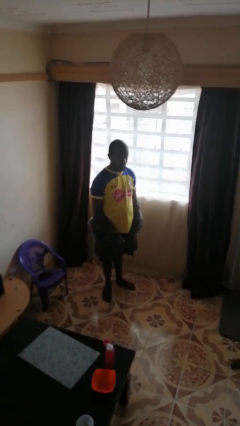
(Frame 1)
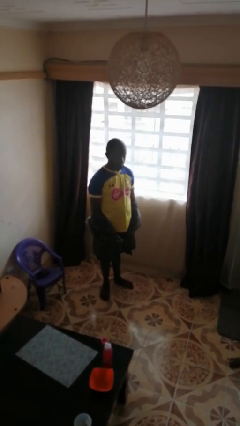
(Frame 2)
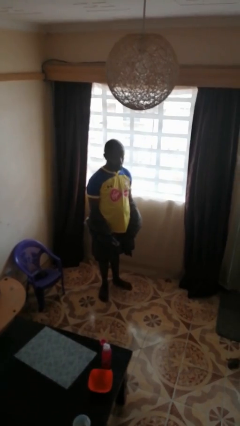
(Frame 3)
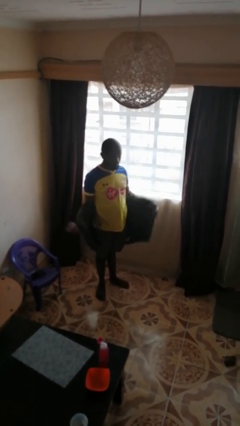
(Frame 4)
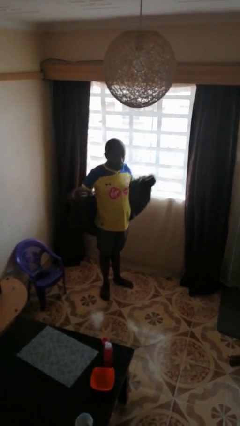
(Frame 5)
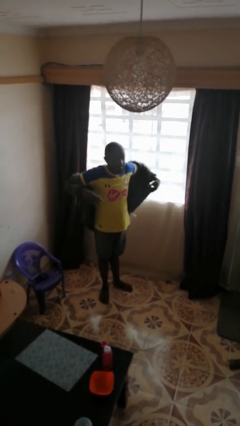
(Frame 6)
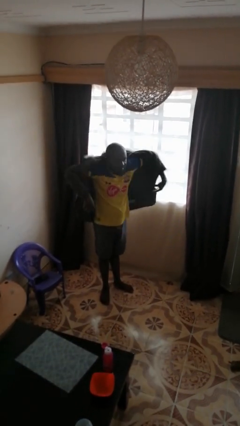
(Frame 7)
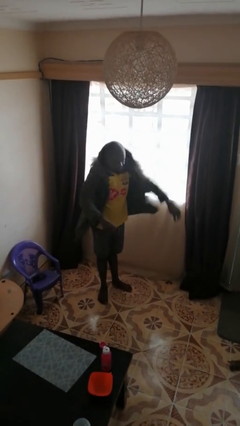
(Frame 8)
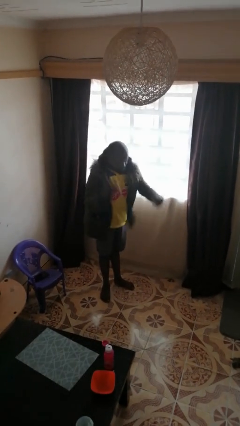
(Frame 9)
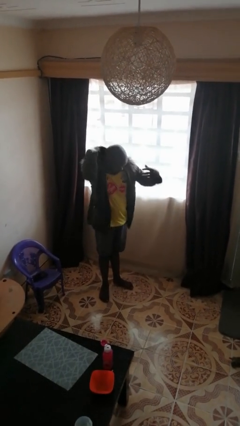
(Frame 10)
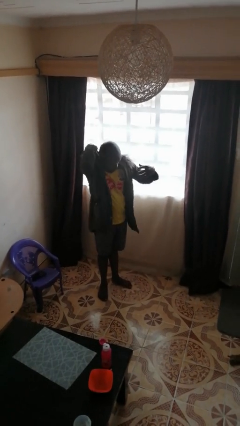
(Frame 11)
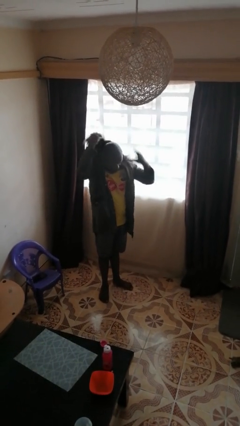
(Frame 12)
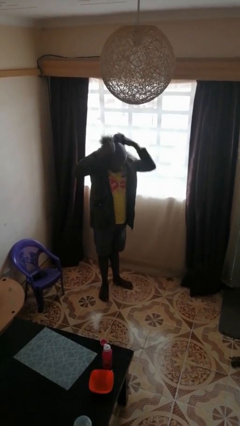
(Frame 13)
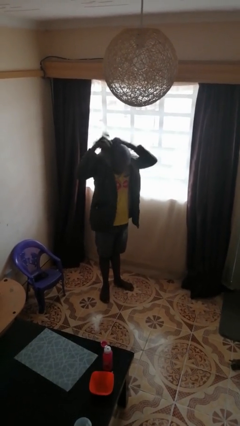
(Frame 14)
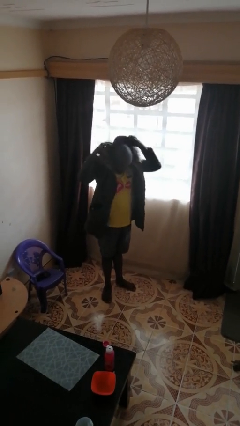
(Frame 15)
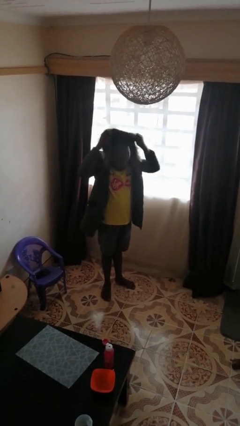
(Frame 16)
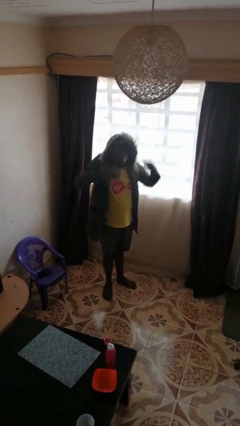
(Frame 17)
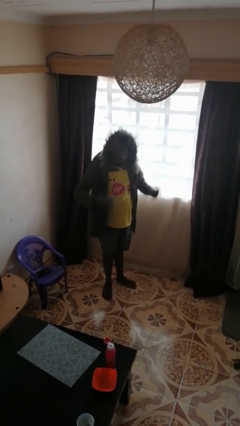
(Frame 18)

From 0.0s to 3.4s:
person puts on hoodie

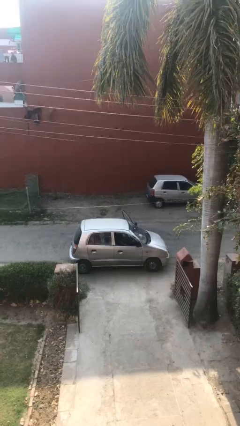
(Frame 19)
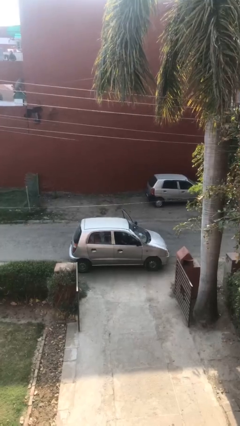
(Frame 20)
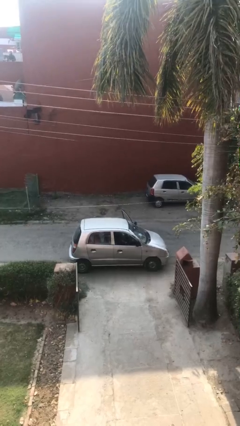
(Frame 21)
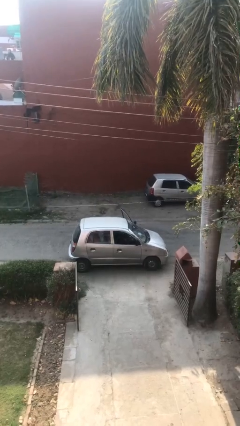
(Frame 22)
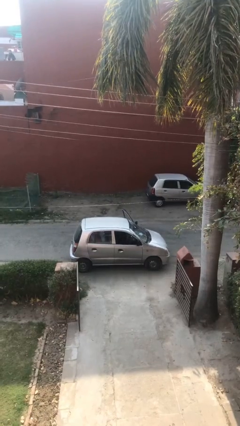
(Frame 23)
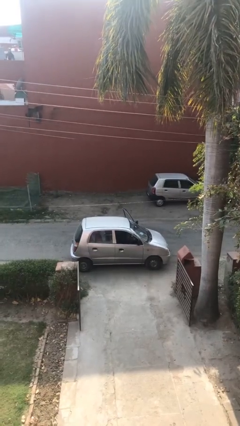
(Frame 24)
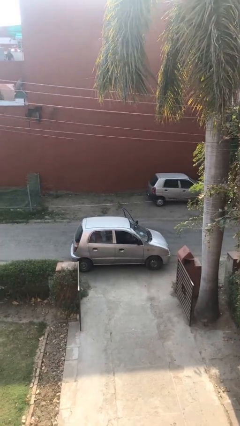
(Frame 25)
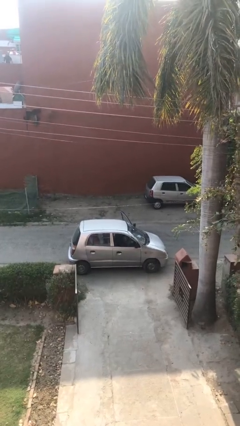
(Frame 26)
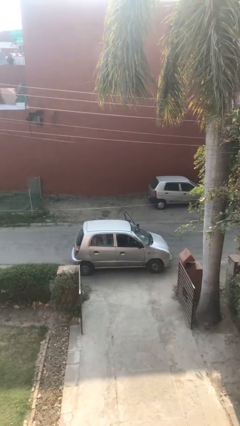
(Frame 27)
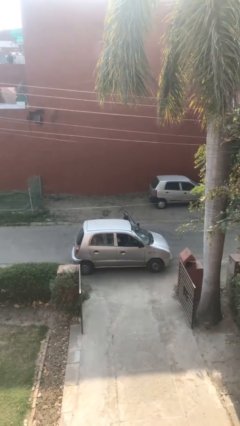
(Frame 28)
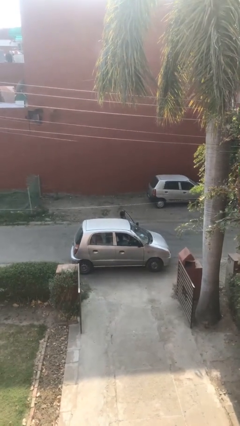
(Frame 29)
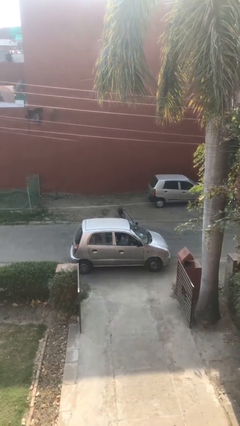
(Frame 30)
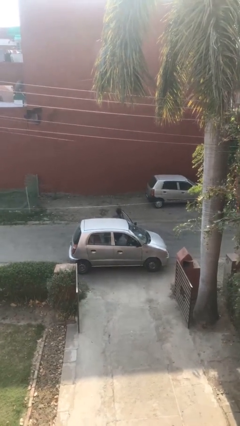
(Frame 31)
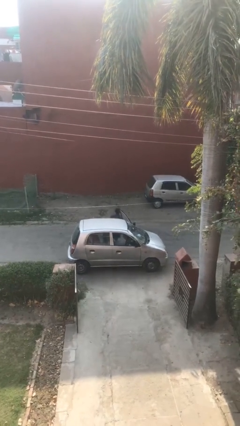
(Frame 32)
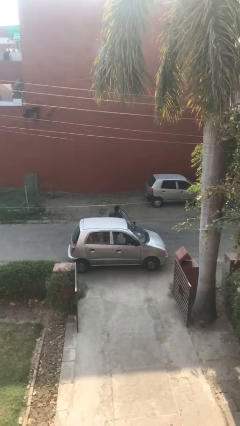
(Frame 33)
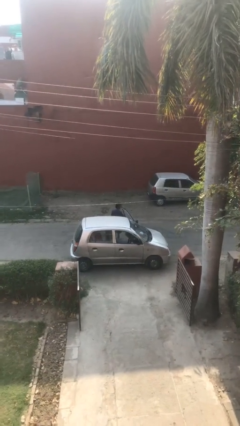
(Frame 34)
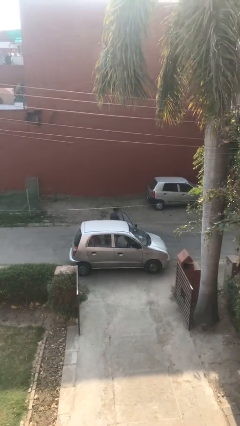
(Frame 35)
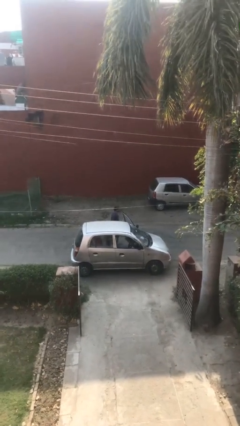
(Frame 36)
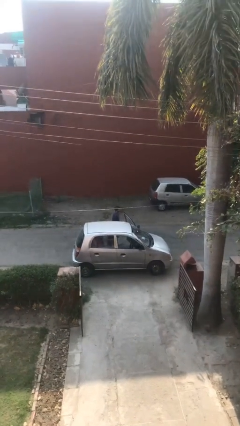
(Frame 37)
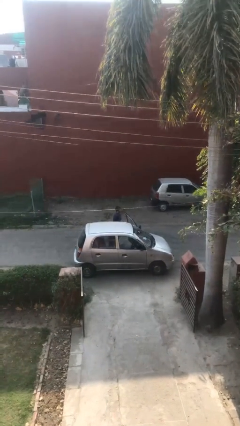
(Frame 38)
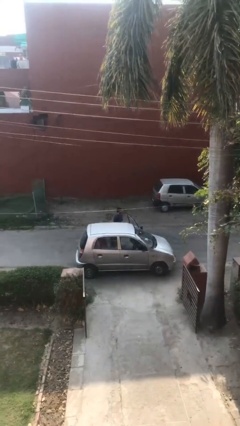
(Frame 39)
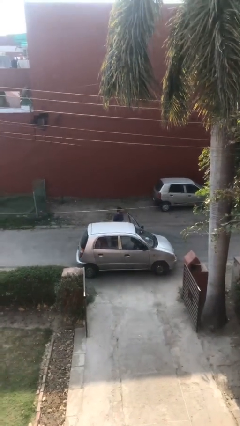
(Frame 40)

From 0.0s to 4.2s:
person exits car

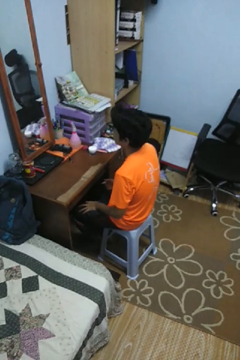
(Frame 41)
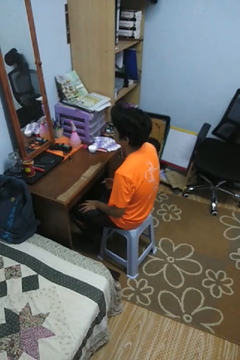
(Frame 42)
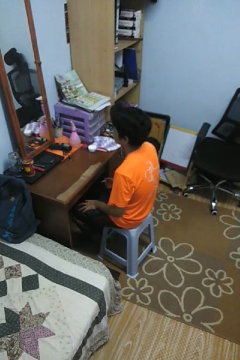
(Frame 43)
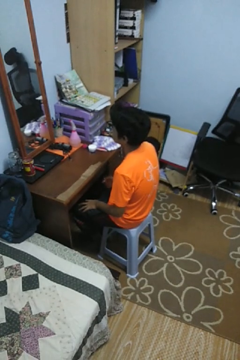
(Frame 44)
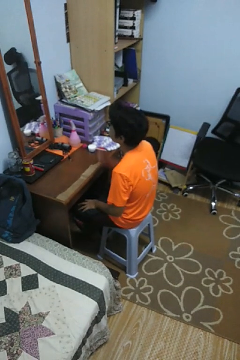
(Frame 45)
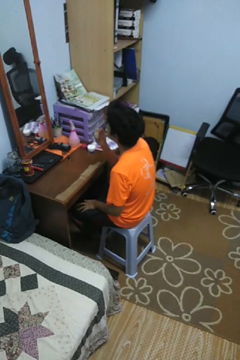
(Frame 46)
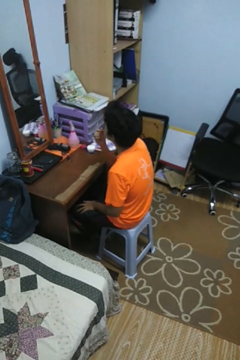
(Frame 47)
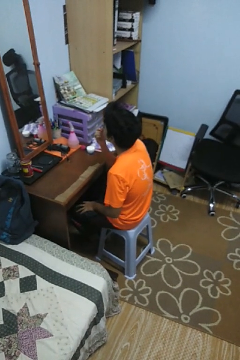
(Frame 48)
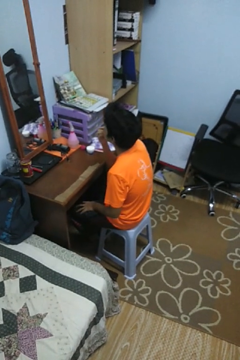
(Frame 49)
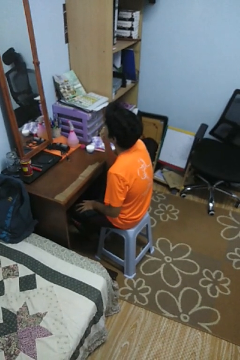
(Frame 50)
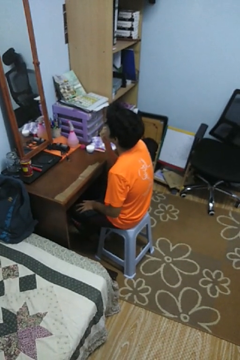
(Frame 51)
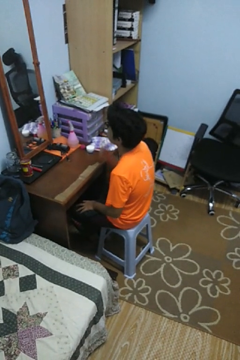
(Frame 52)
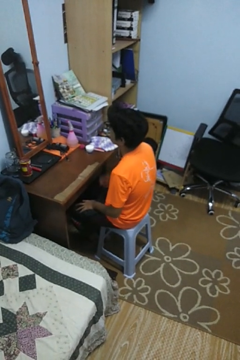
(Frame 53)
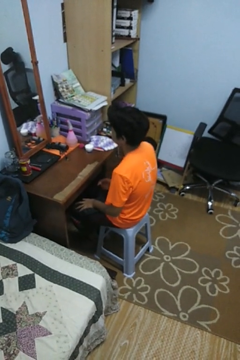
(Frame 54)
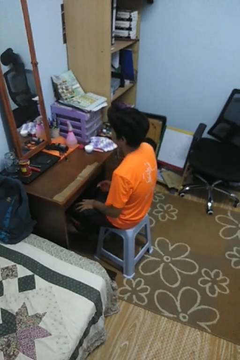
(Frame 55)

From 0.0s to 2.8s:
person applies lip makeup

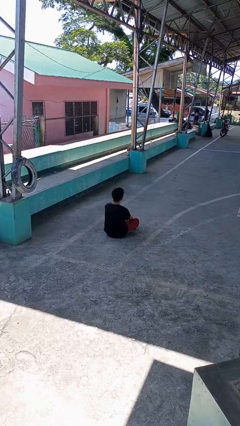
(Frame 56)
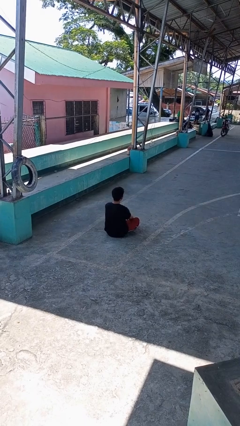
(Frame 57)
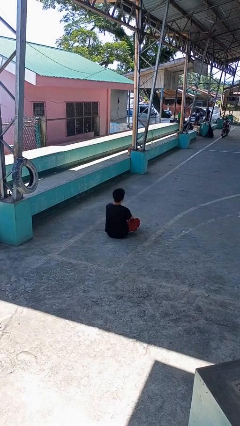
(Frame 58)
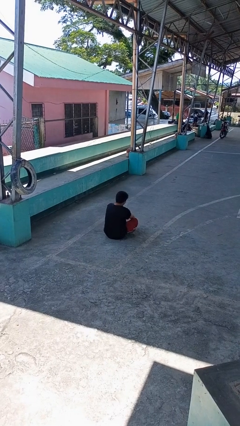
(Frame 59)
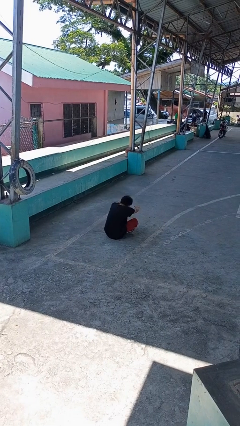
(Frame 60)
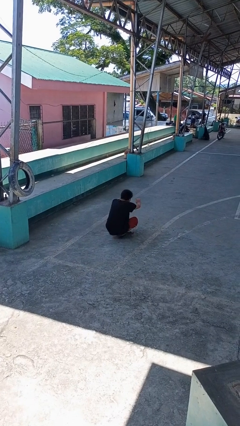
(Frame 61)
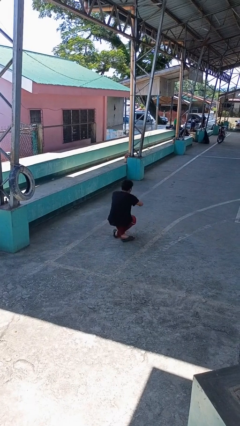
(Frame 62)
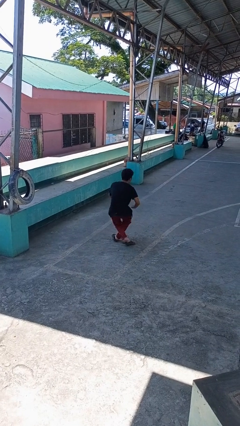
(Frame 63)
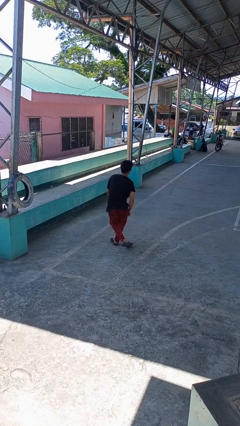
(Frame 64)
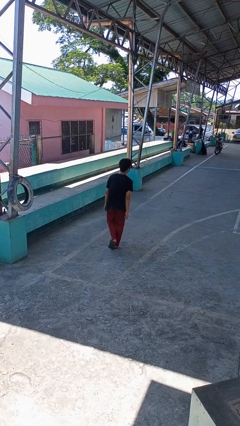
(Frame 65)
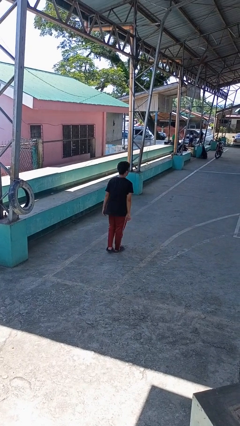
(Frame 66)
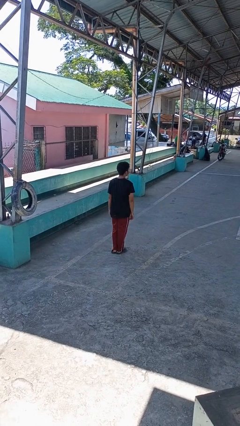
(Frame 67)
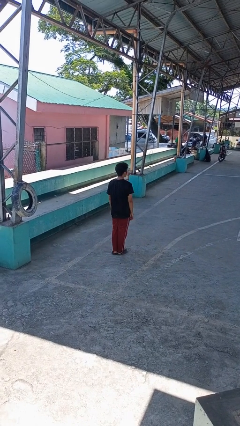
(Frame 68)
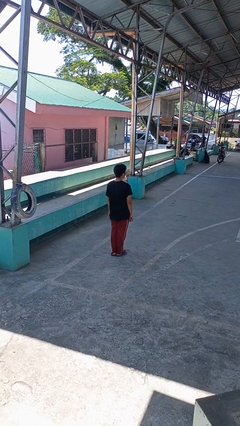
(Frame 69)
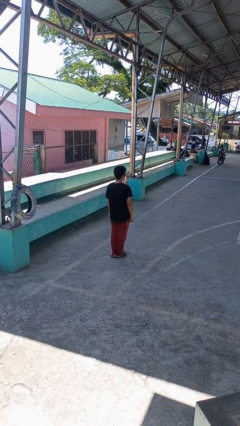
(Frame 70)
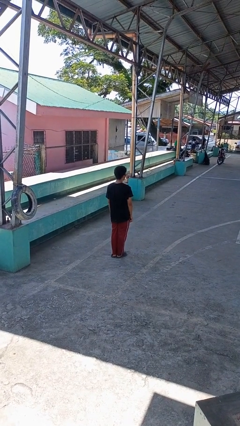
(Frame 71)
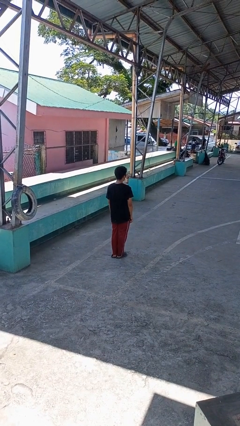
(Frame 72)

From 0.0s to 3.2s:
person stands up from floor

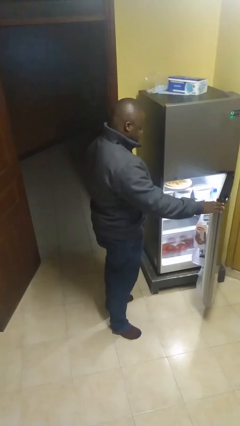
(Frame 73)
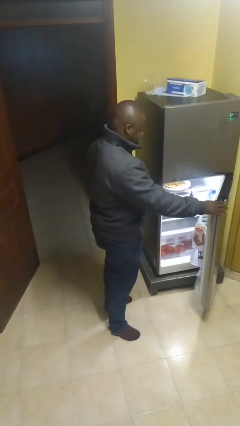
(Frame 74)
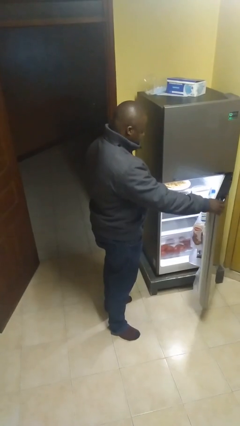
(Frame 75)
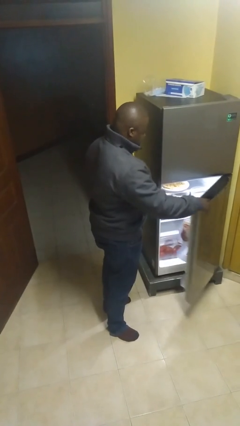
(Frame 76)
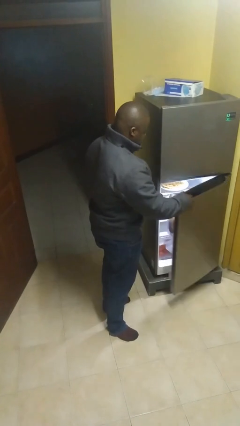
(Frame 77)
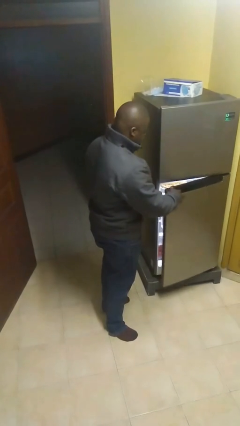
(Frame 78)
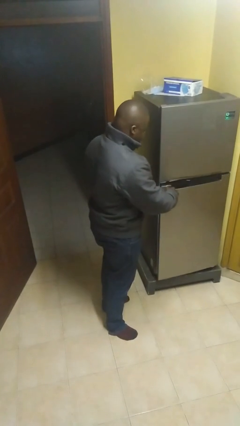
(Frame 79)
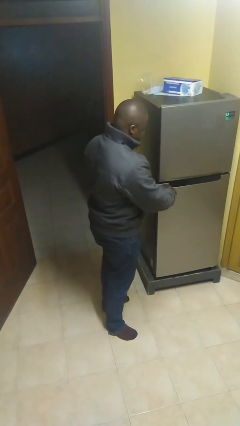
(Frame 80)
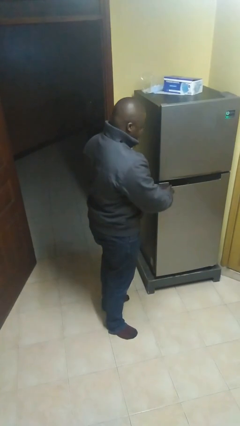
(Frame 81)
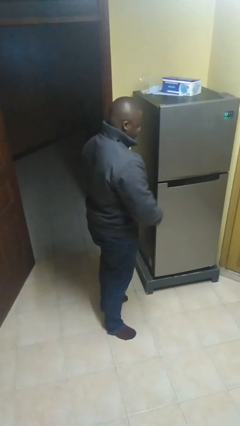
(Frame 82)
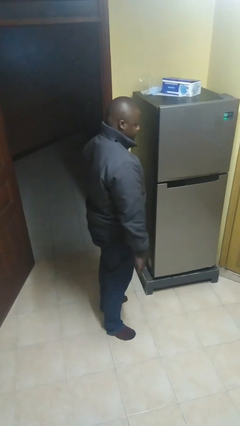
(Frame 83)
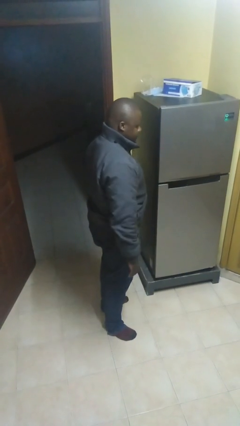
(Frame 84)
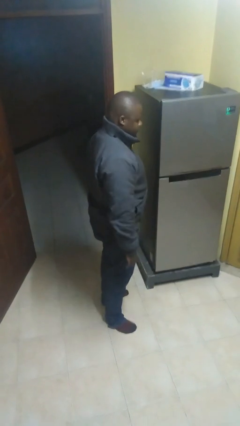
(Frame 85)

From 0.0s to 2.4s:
person closes refrigerator

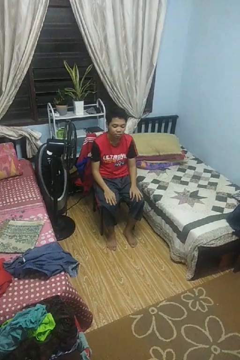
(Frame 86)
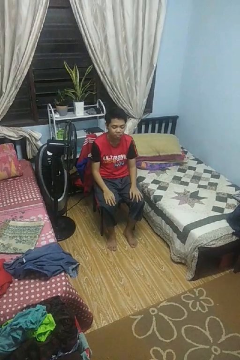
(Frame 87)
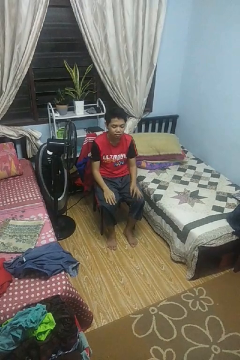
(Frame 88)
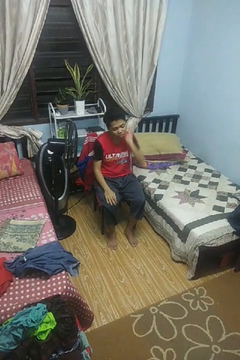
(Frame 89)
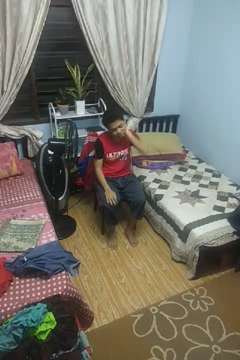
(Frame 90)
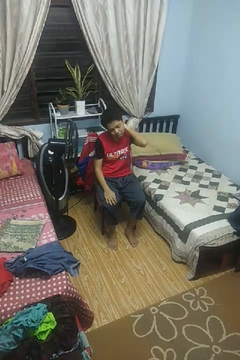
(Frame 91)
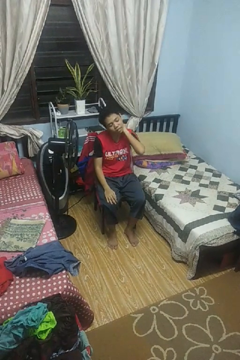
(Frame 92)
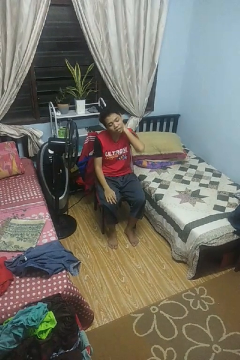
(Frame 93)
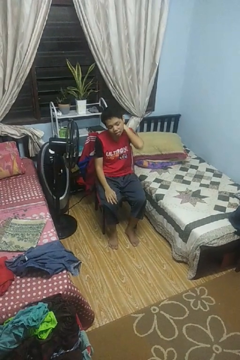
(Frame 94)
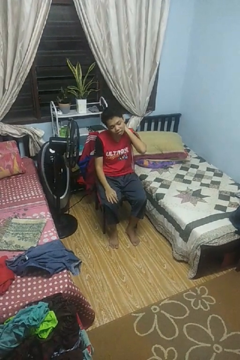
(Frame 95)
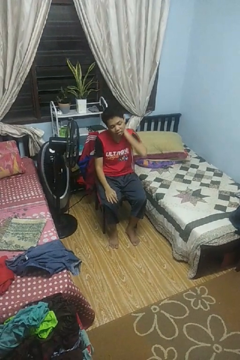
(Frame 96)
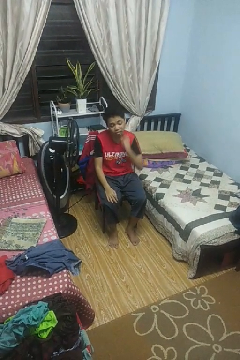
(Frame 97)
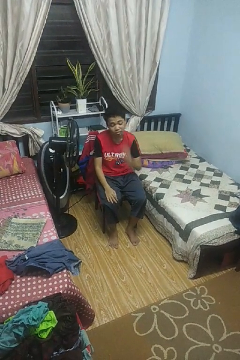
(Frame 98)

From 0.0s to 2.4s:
person rubs neck
